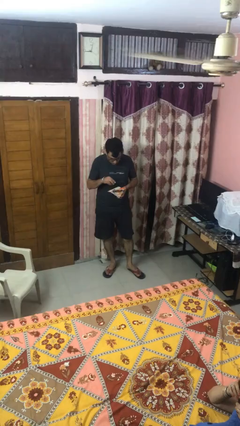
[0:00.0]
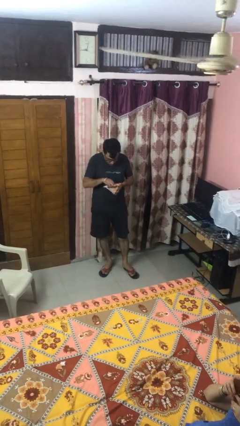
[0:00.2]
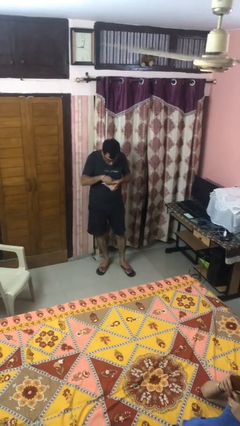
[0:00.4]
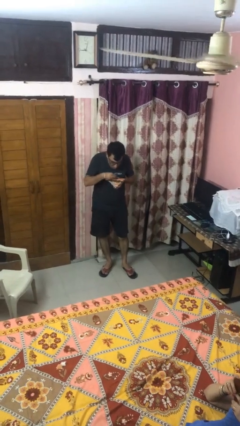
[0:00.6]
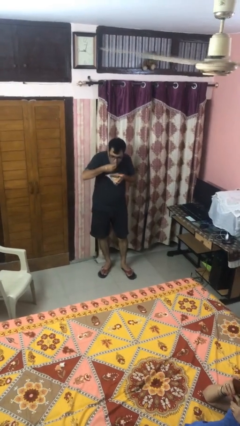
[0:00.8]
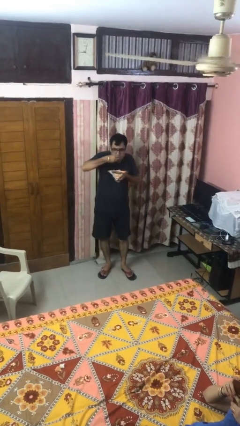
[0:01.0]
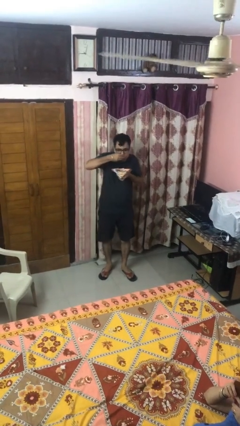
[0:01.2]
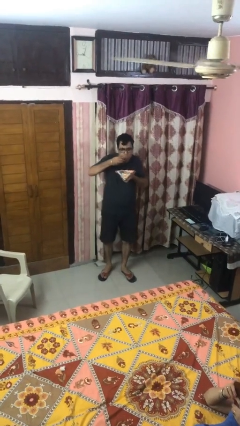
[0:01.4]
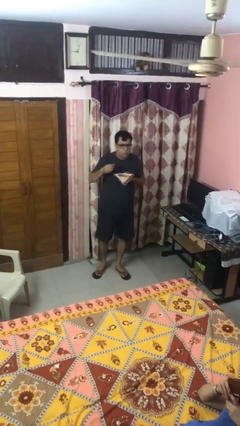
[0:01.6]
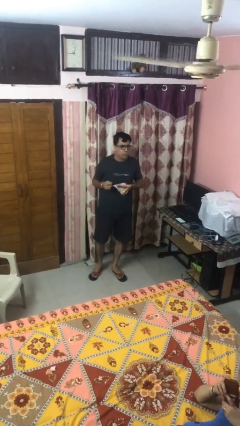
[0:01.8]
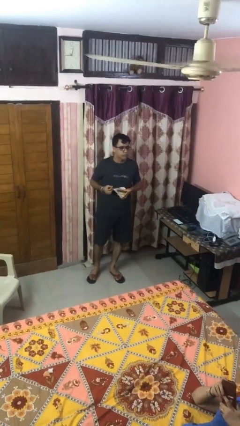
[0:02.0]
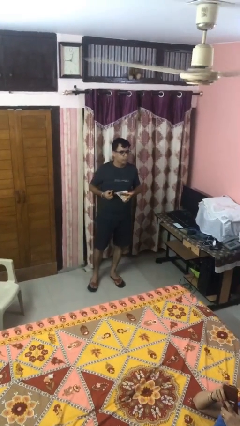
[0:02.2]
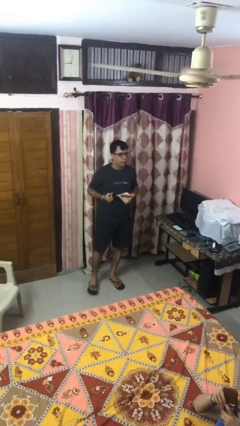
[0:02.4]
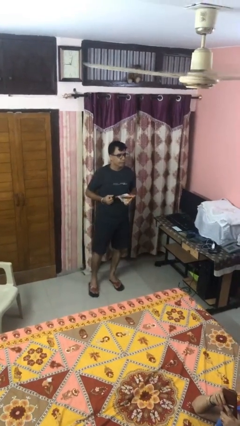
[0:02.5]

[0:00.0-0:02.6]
person eats snack from bag

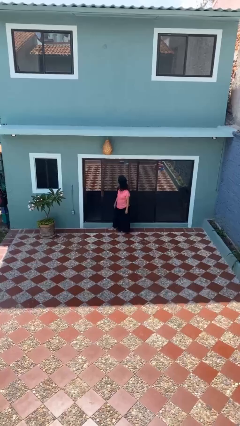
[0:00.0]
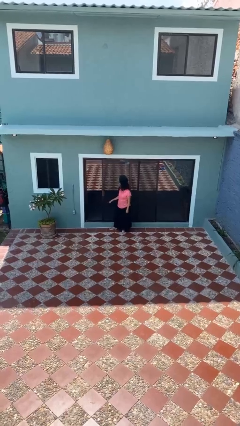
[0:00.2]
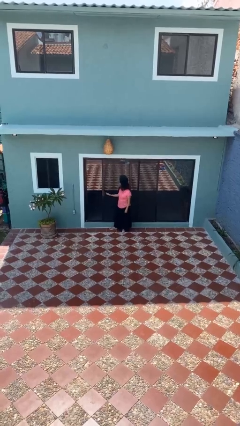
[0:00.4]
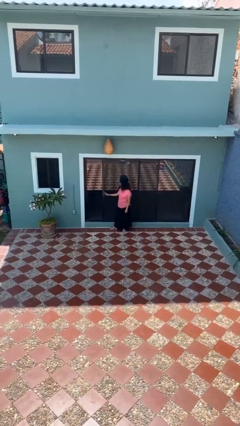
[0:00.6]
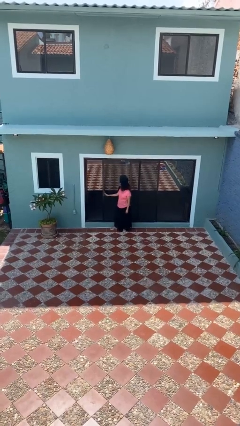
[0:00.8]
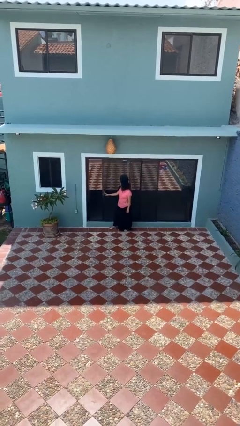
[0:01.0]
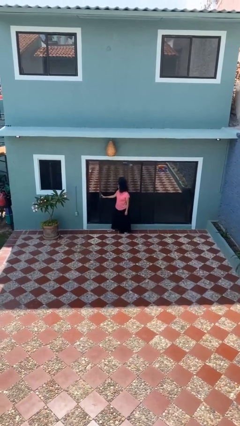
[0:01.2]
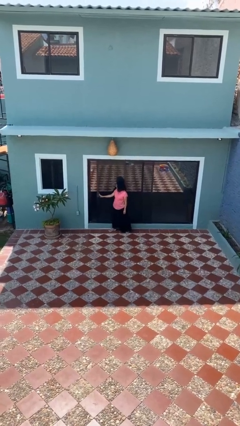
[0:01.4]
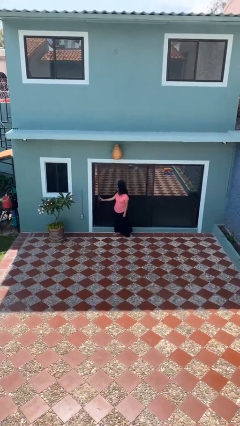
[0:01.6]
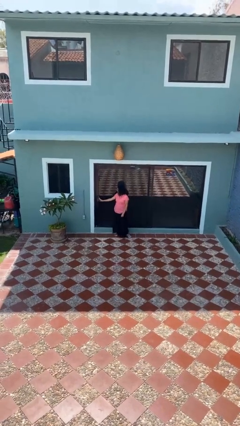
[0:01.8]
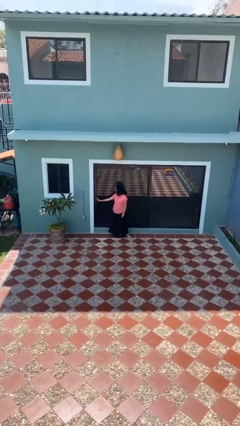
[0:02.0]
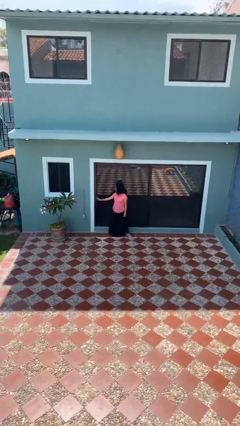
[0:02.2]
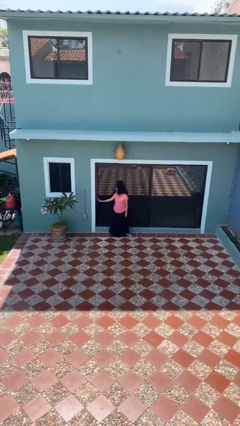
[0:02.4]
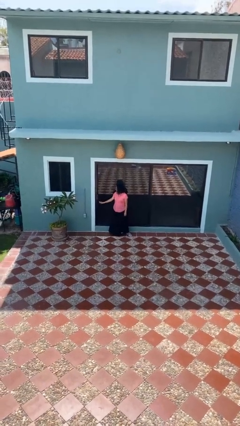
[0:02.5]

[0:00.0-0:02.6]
person closes sliding door

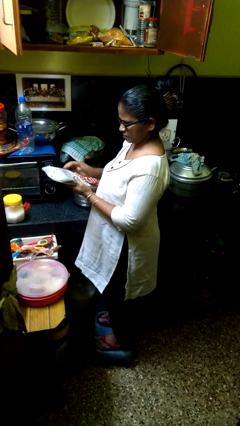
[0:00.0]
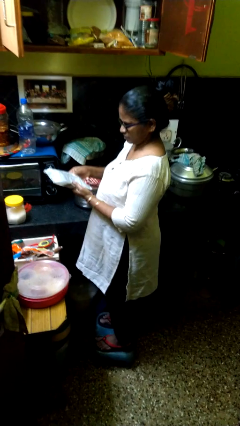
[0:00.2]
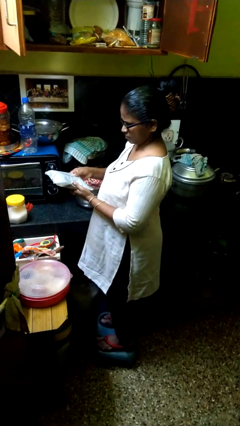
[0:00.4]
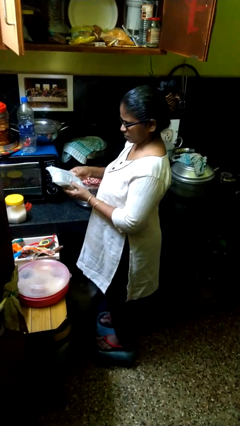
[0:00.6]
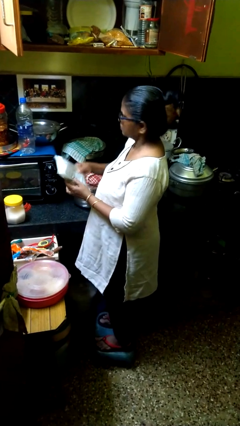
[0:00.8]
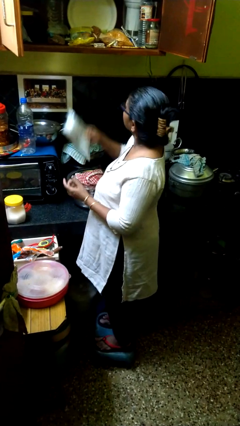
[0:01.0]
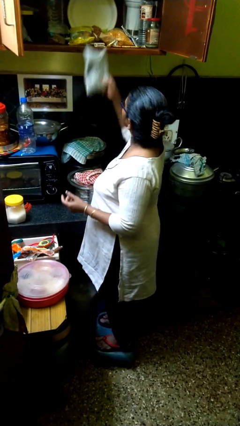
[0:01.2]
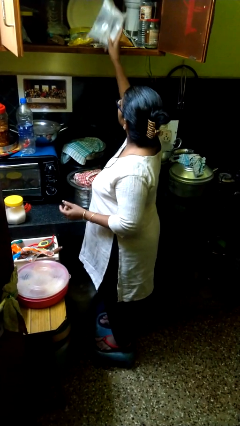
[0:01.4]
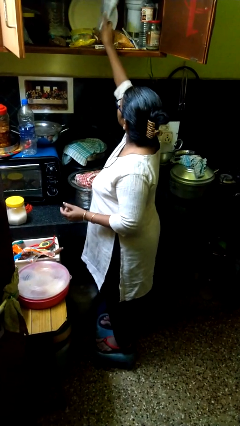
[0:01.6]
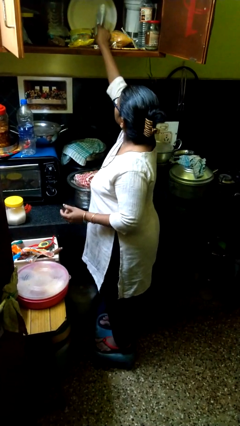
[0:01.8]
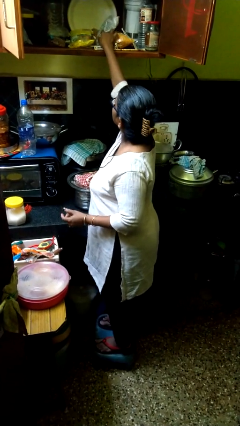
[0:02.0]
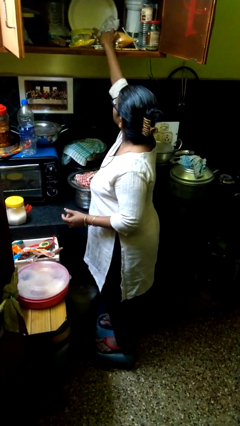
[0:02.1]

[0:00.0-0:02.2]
person puts object in cabinet

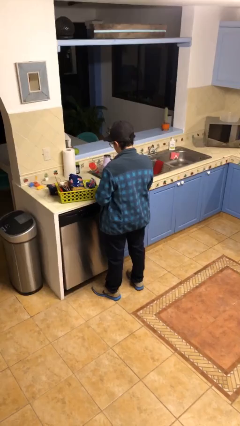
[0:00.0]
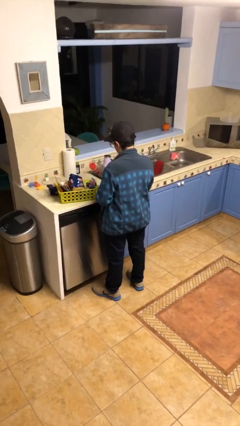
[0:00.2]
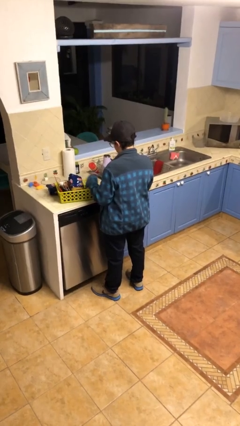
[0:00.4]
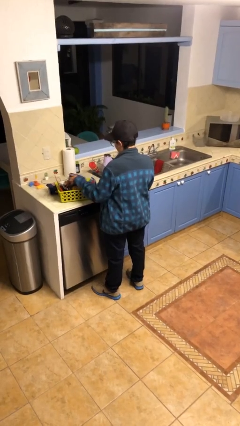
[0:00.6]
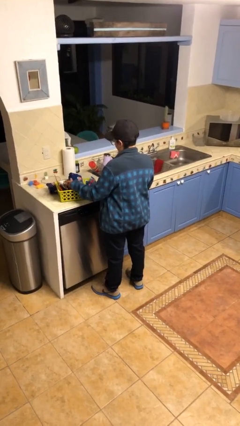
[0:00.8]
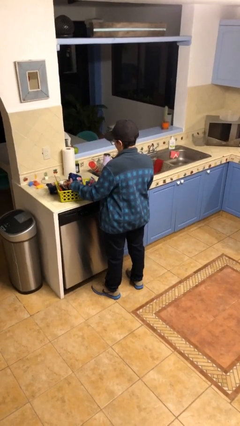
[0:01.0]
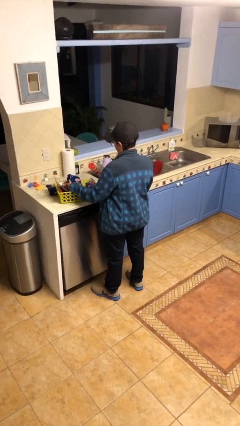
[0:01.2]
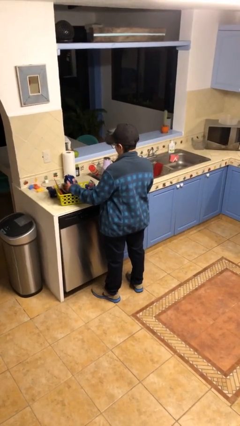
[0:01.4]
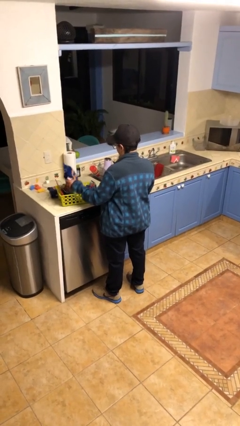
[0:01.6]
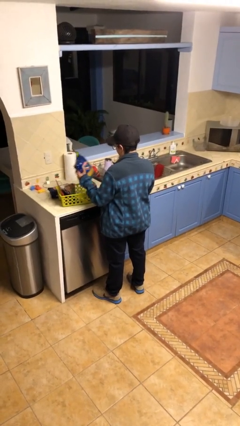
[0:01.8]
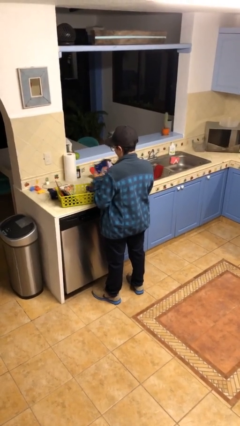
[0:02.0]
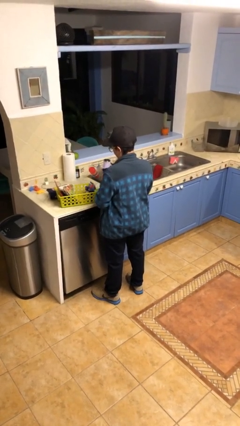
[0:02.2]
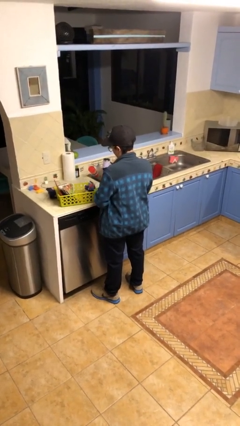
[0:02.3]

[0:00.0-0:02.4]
person takes object from basket

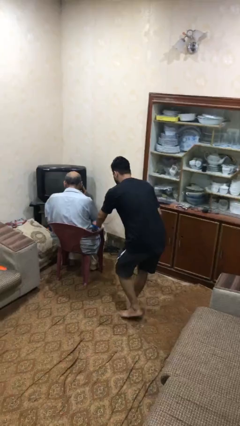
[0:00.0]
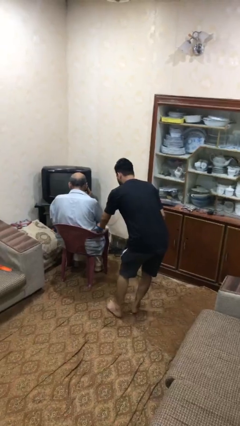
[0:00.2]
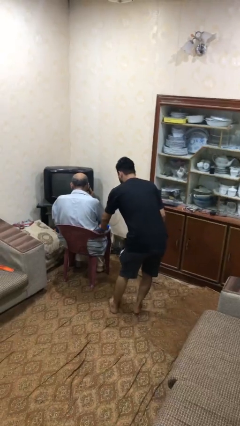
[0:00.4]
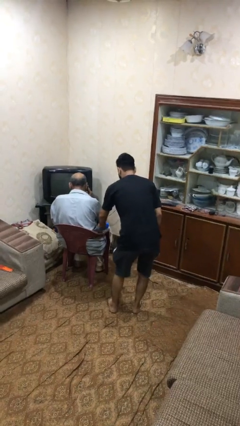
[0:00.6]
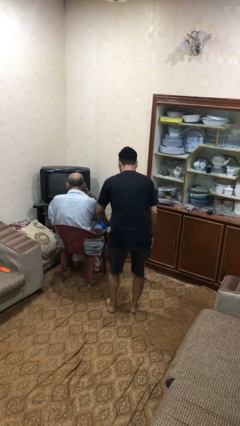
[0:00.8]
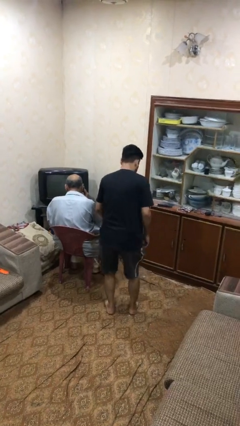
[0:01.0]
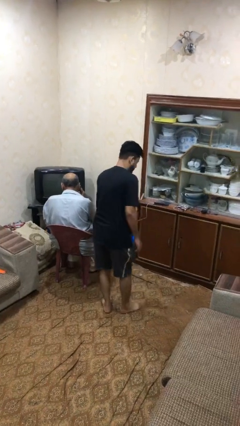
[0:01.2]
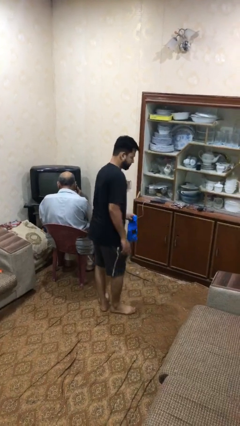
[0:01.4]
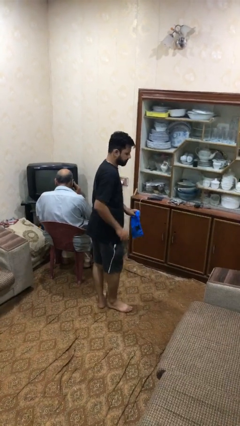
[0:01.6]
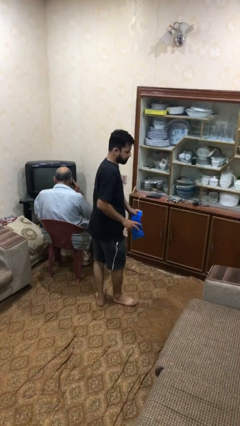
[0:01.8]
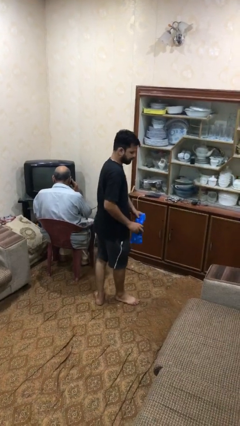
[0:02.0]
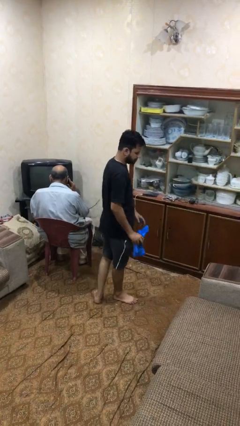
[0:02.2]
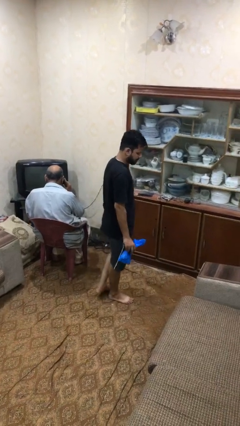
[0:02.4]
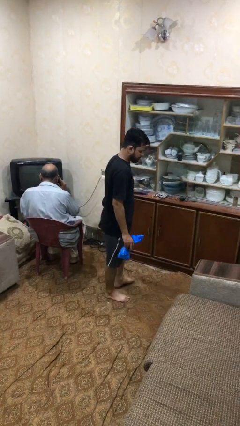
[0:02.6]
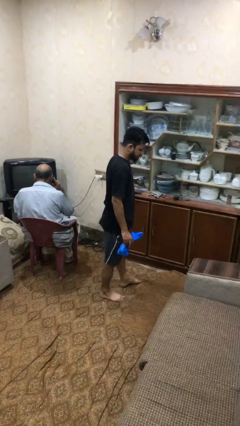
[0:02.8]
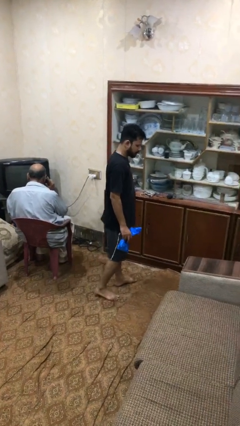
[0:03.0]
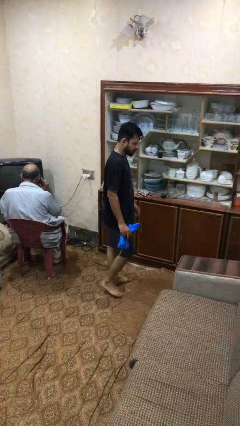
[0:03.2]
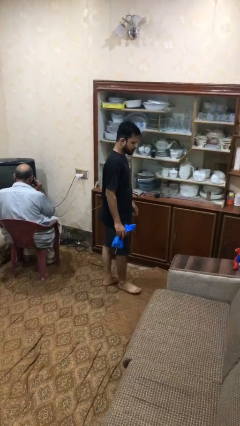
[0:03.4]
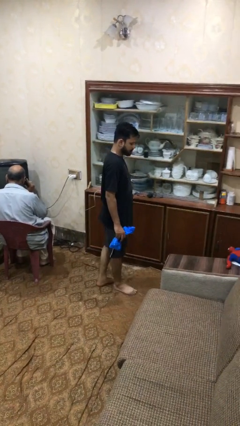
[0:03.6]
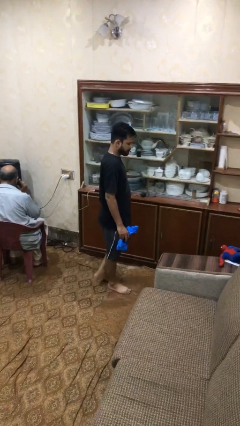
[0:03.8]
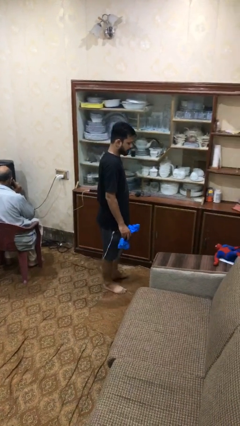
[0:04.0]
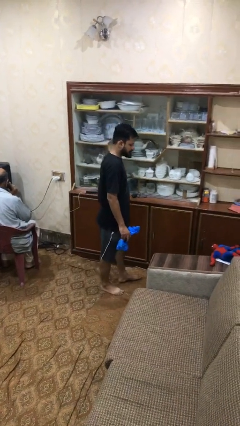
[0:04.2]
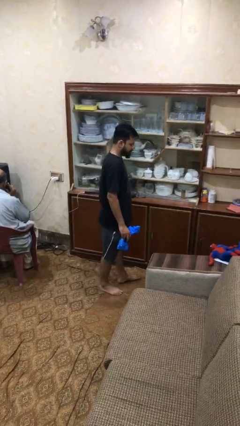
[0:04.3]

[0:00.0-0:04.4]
person steals object from person

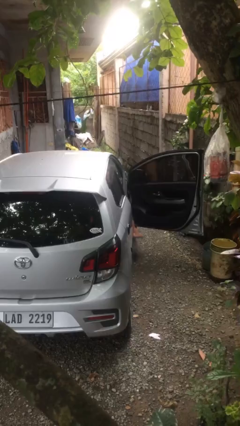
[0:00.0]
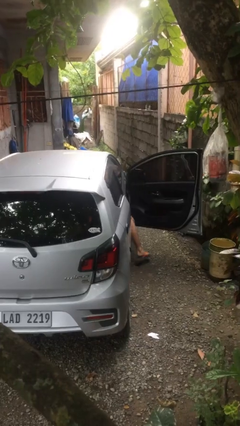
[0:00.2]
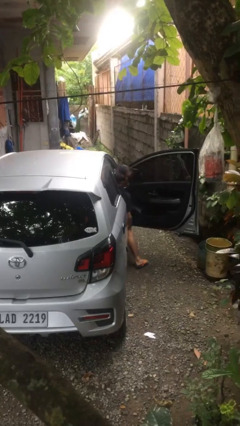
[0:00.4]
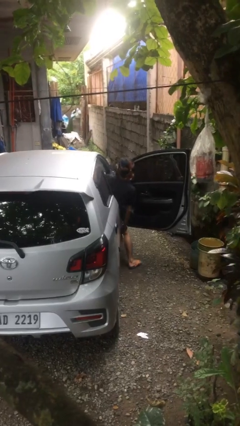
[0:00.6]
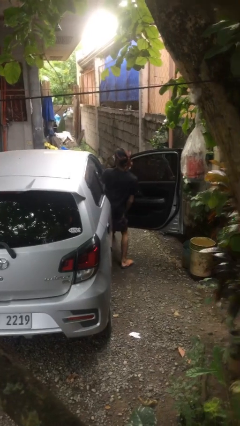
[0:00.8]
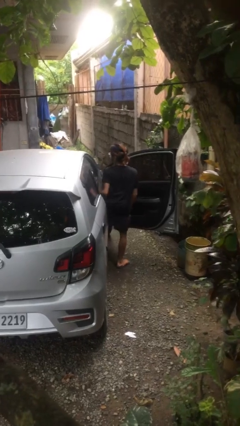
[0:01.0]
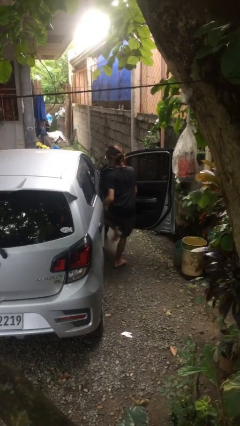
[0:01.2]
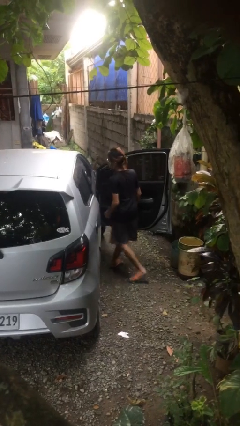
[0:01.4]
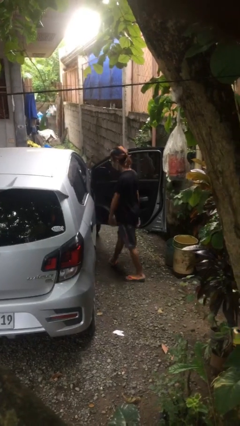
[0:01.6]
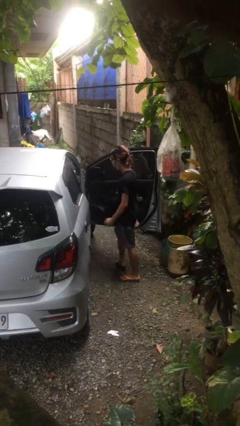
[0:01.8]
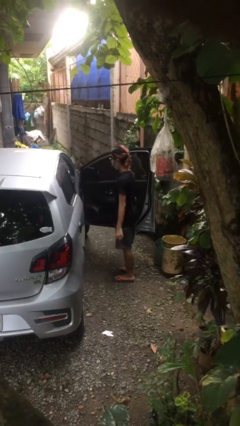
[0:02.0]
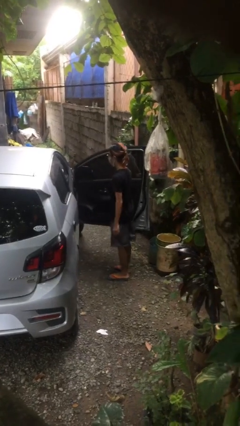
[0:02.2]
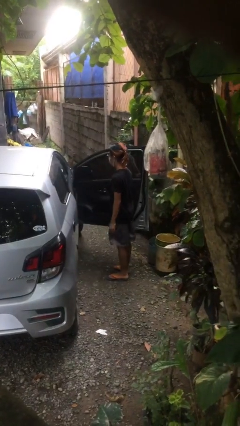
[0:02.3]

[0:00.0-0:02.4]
person exits car

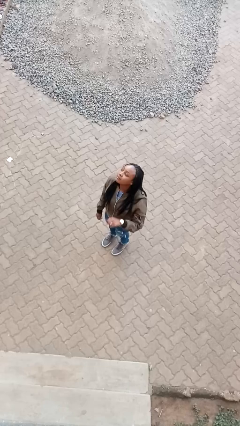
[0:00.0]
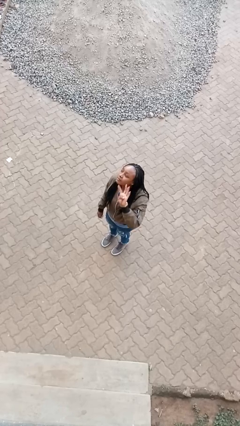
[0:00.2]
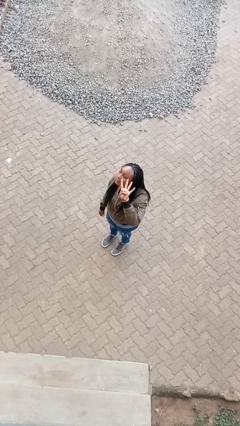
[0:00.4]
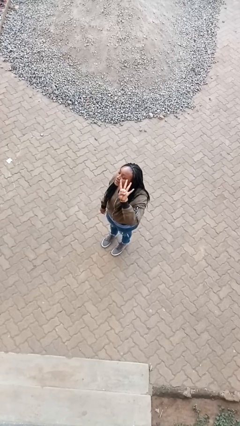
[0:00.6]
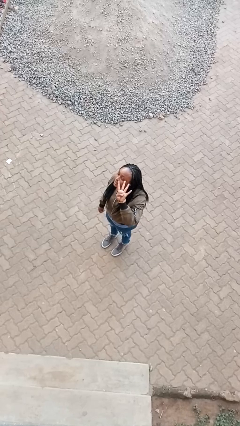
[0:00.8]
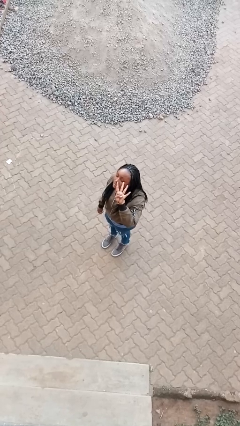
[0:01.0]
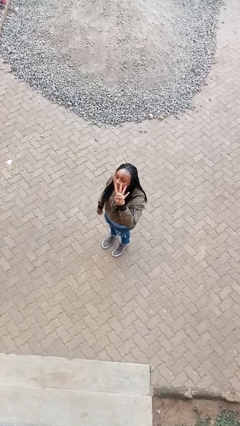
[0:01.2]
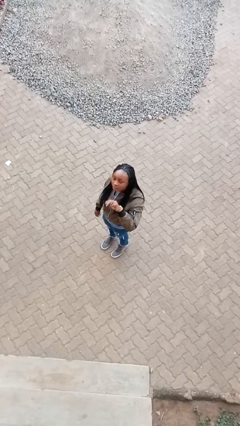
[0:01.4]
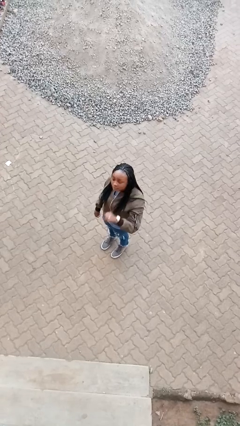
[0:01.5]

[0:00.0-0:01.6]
person gestures number four
